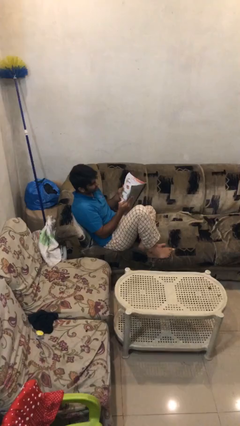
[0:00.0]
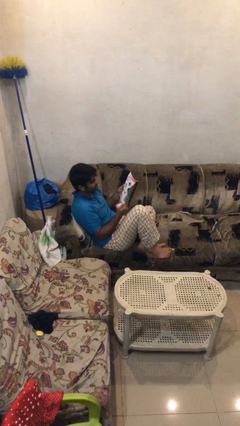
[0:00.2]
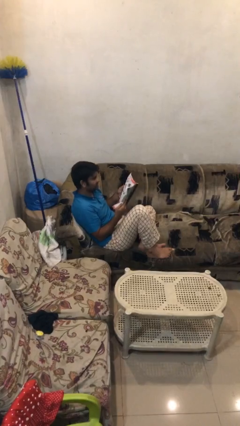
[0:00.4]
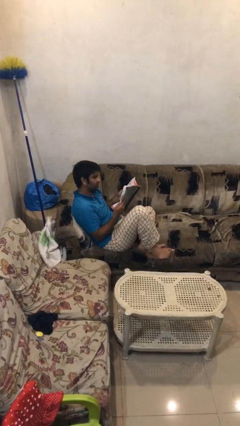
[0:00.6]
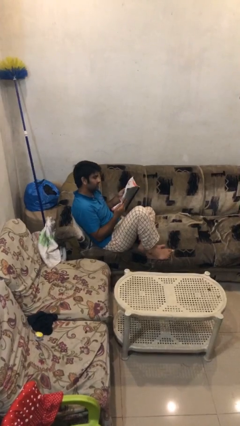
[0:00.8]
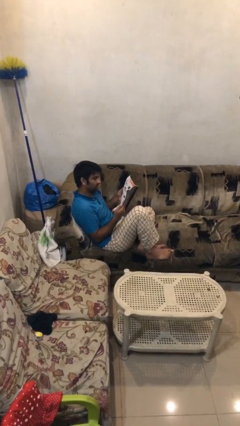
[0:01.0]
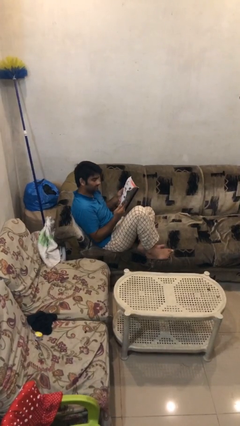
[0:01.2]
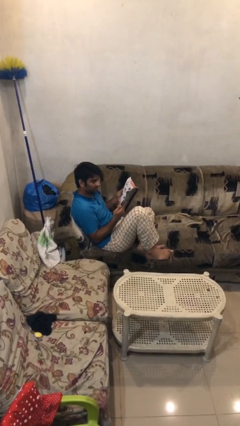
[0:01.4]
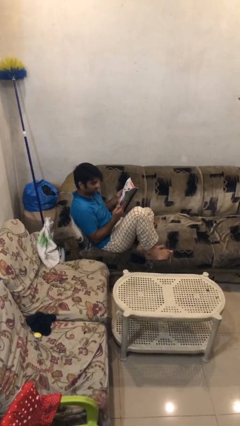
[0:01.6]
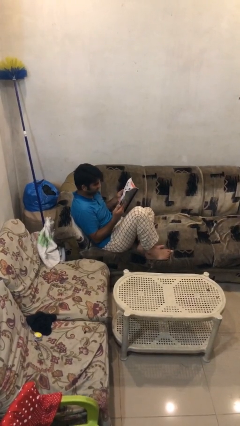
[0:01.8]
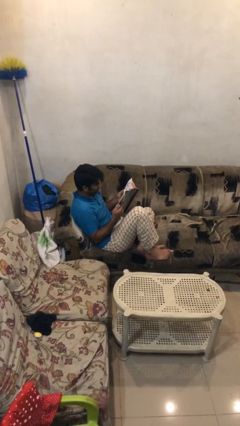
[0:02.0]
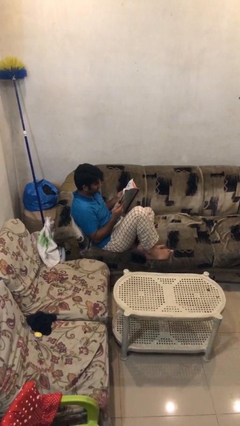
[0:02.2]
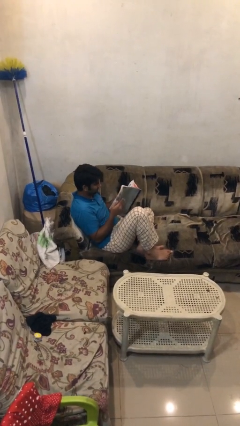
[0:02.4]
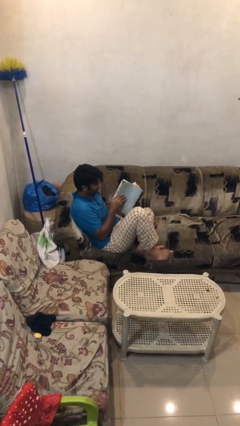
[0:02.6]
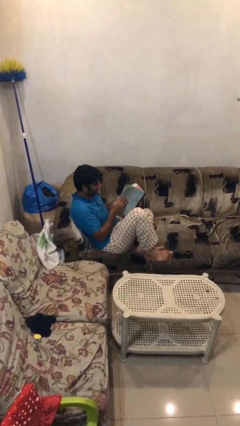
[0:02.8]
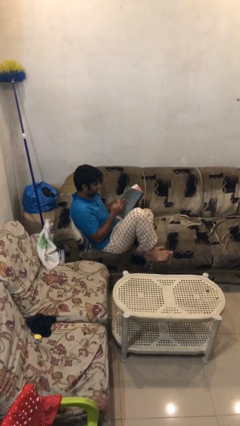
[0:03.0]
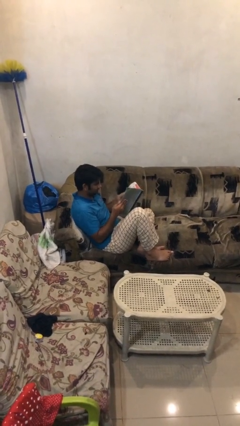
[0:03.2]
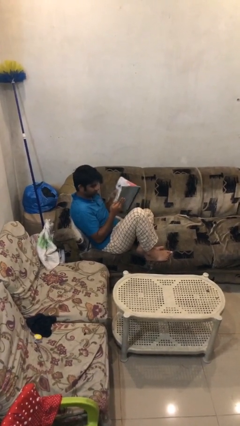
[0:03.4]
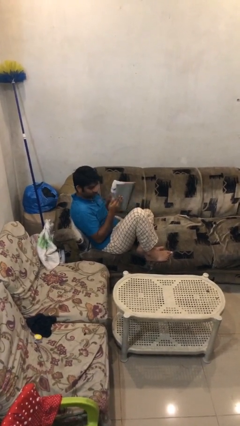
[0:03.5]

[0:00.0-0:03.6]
person reads document

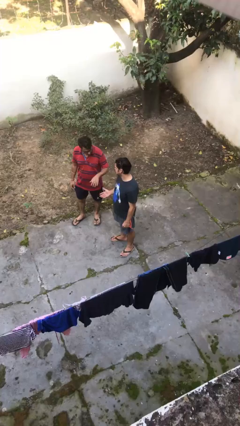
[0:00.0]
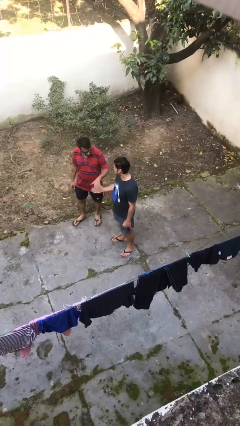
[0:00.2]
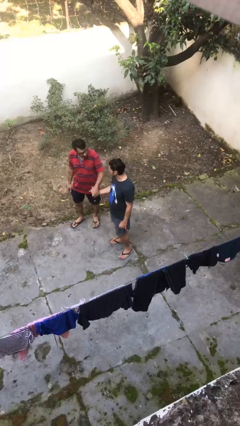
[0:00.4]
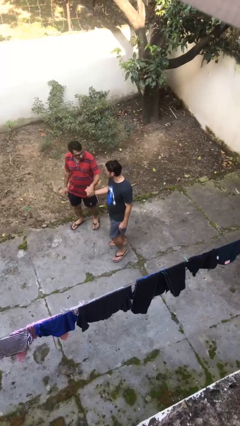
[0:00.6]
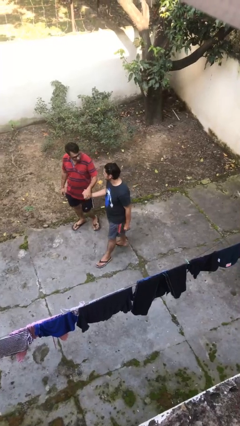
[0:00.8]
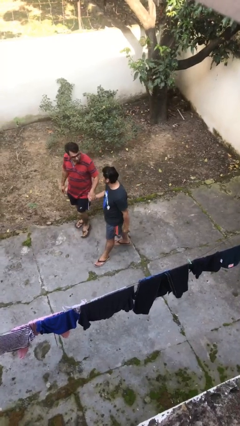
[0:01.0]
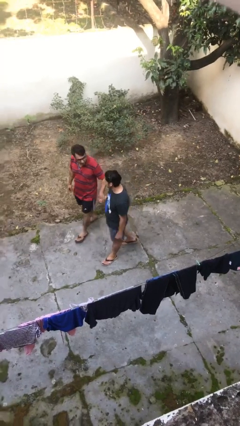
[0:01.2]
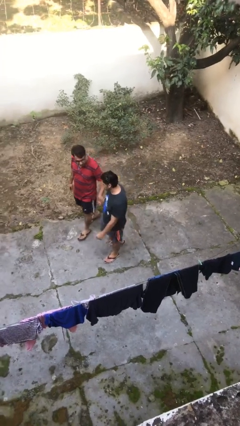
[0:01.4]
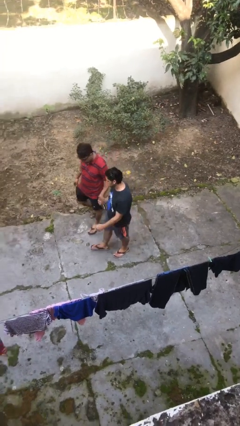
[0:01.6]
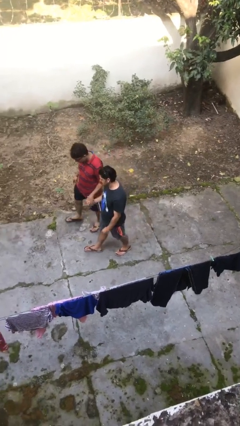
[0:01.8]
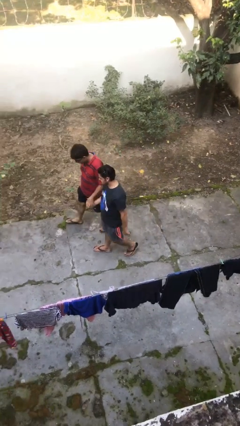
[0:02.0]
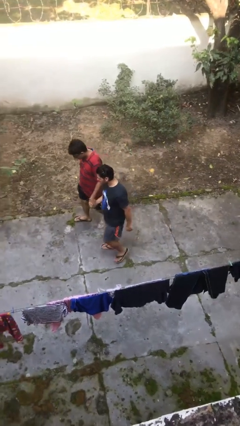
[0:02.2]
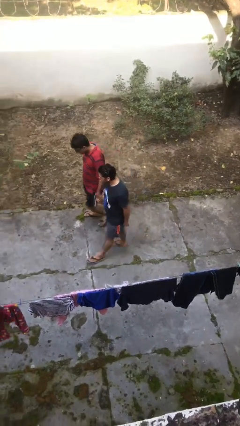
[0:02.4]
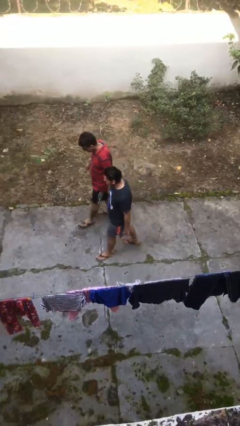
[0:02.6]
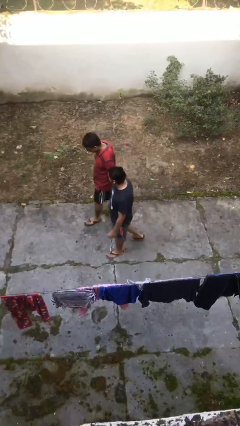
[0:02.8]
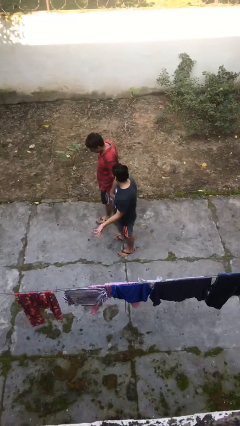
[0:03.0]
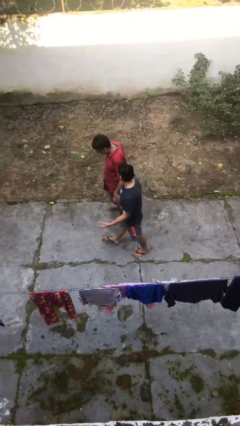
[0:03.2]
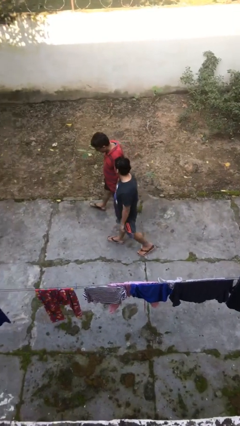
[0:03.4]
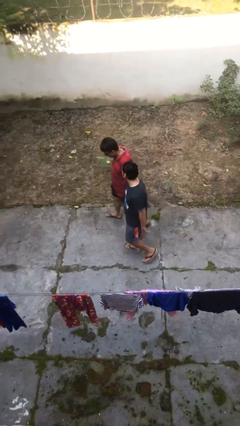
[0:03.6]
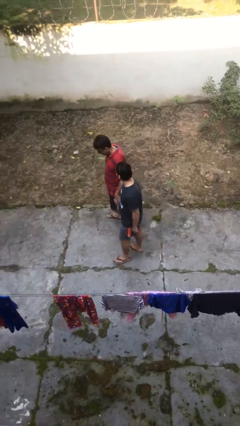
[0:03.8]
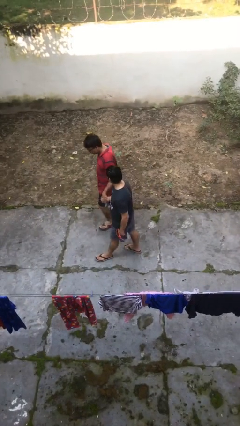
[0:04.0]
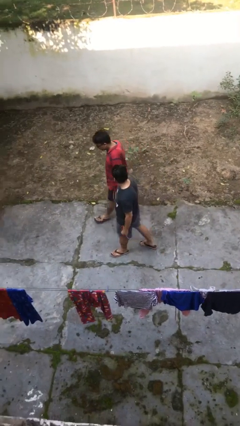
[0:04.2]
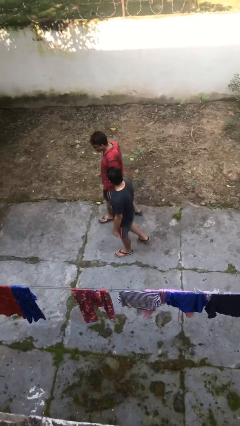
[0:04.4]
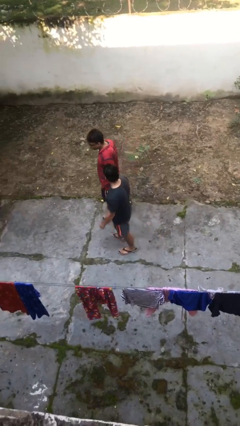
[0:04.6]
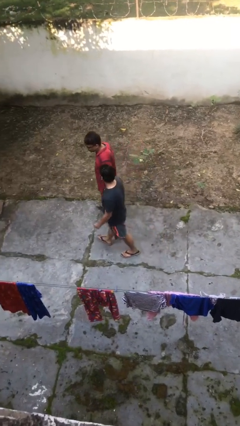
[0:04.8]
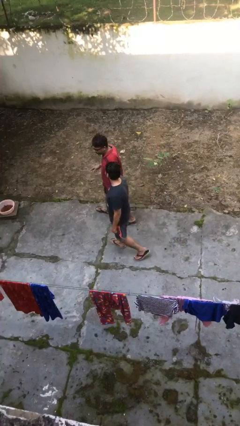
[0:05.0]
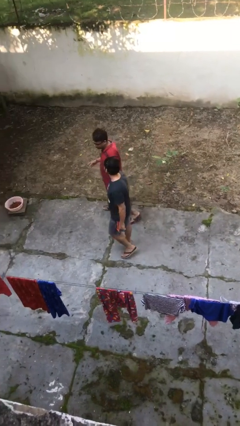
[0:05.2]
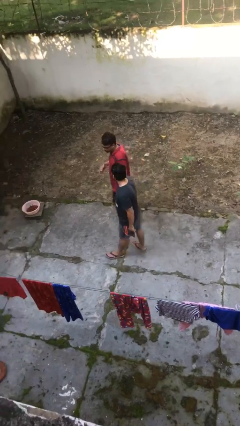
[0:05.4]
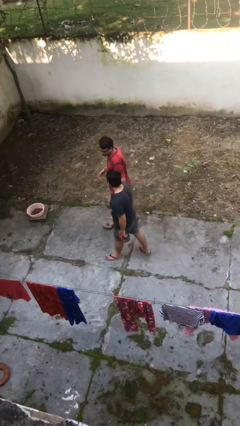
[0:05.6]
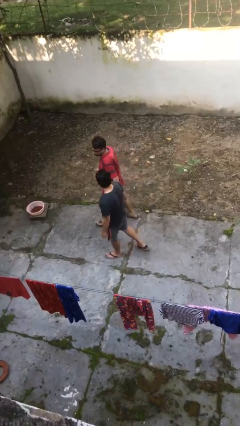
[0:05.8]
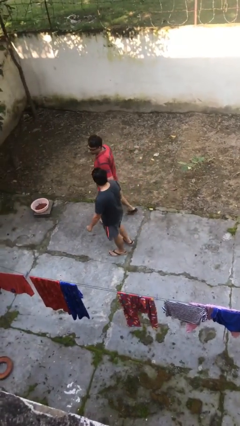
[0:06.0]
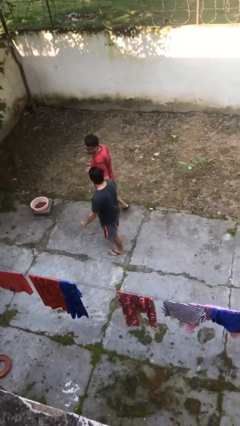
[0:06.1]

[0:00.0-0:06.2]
person holds hand

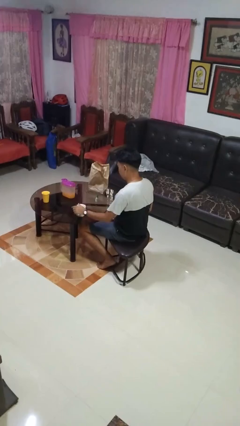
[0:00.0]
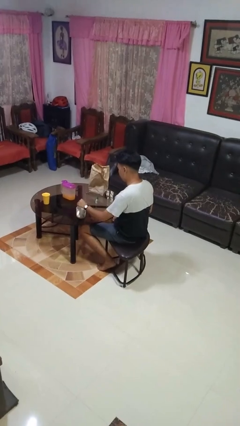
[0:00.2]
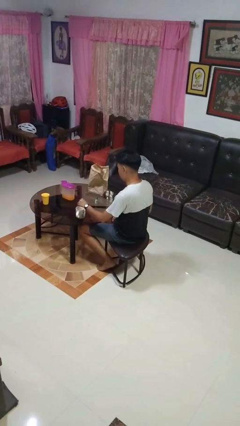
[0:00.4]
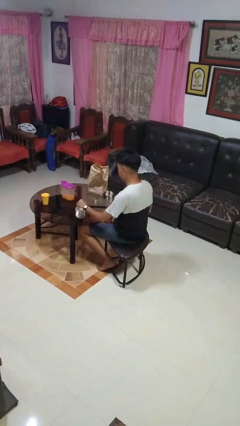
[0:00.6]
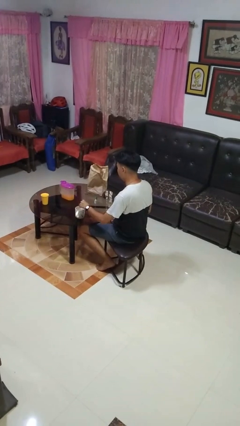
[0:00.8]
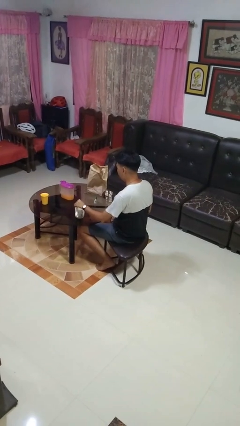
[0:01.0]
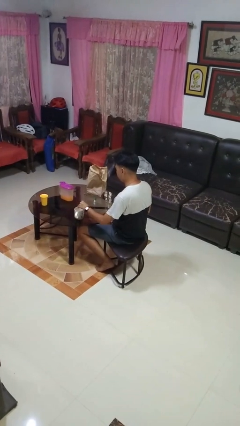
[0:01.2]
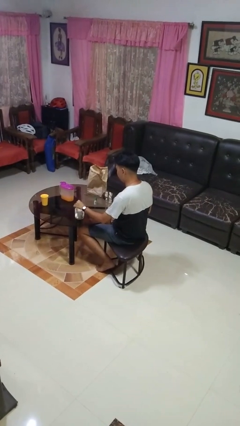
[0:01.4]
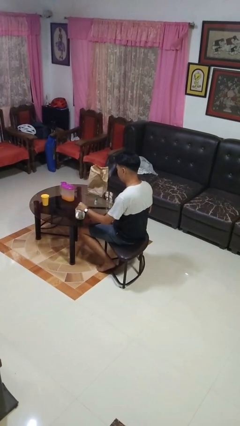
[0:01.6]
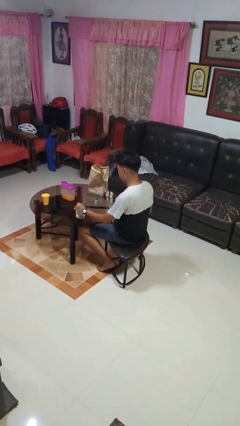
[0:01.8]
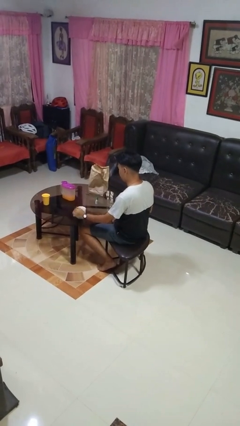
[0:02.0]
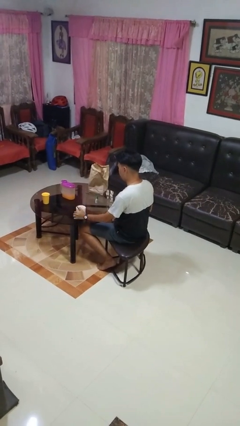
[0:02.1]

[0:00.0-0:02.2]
person stirs mug

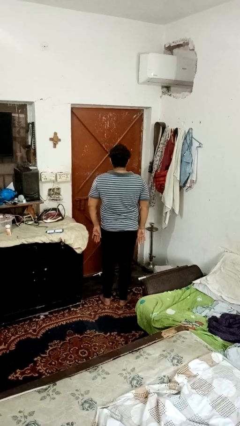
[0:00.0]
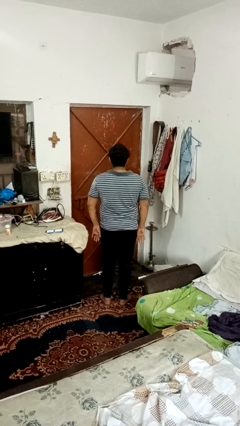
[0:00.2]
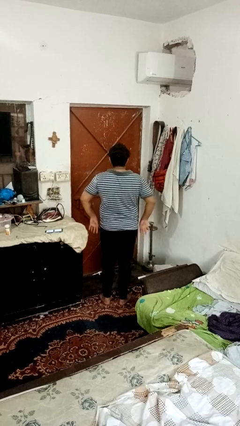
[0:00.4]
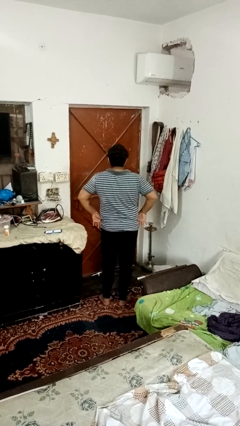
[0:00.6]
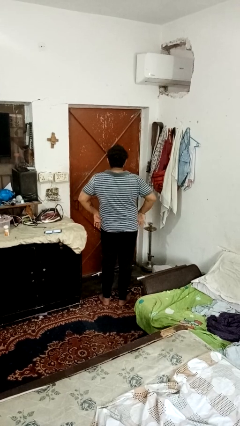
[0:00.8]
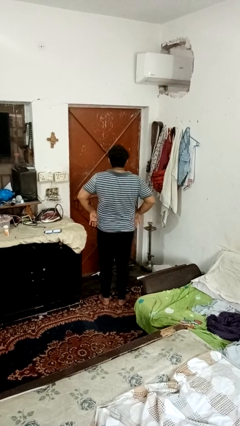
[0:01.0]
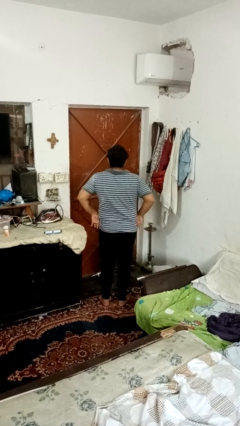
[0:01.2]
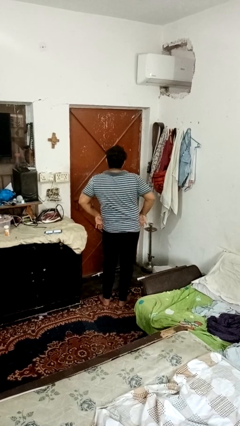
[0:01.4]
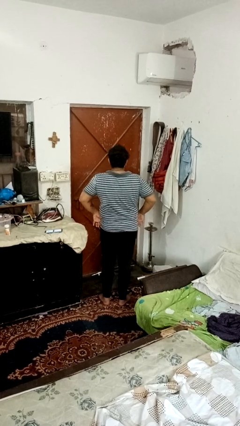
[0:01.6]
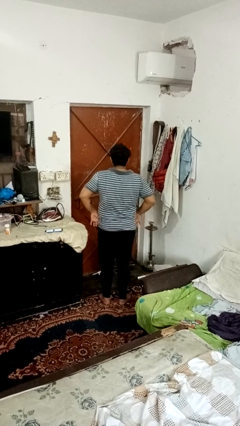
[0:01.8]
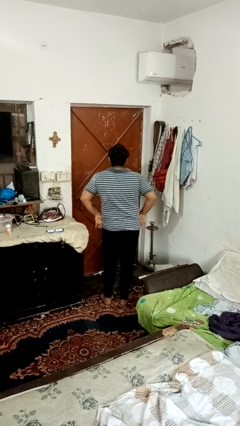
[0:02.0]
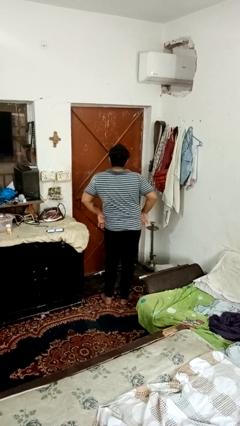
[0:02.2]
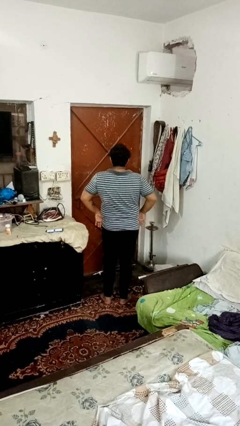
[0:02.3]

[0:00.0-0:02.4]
person wiggles hips

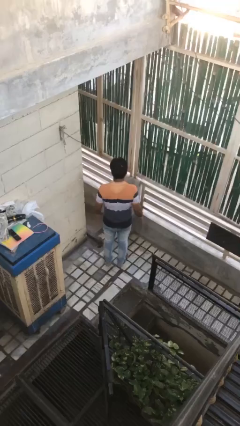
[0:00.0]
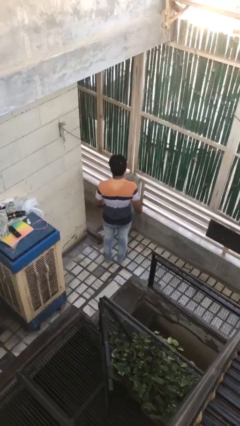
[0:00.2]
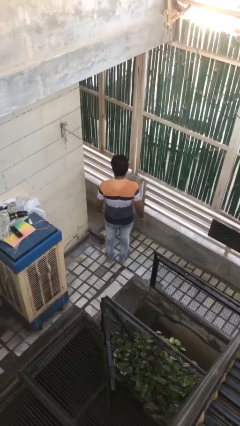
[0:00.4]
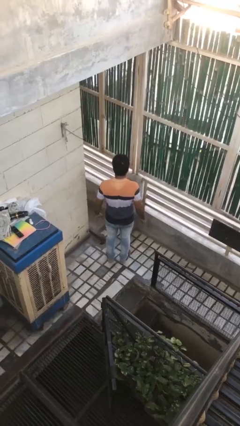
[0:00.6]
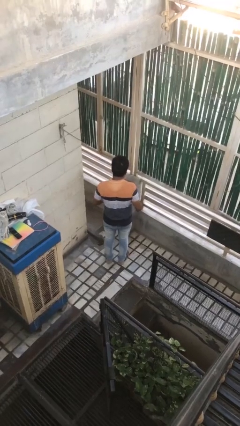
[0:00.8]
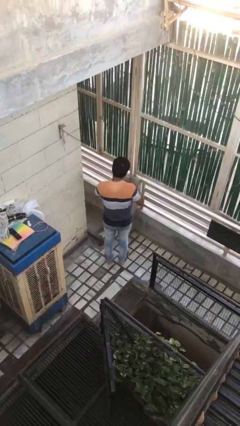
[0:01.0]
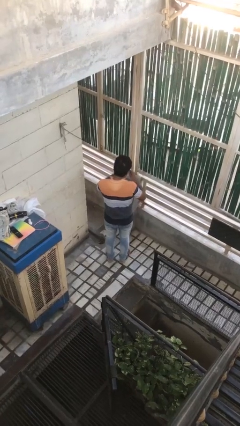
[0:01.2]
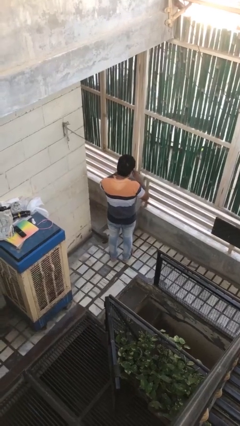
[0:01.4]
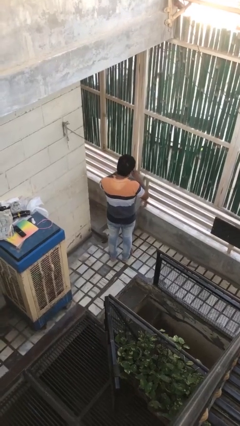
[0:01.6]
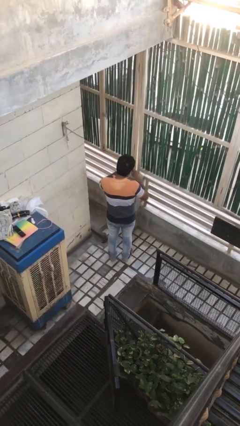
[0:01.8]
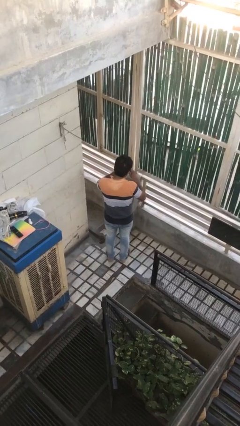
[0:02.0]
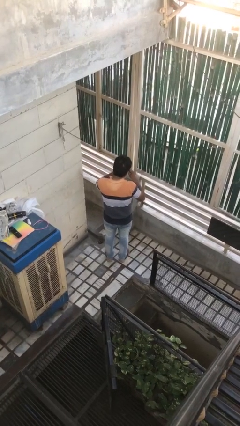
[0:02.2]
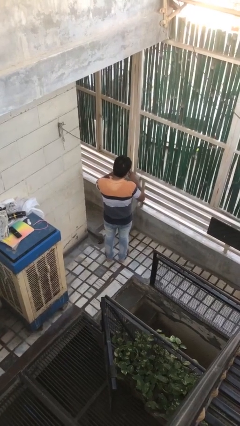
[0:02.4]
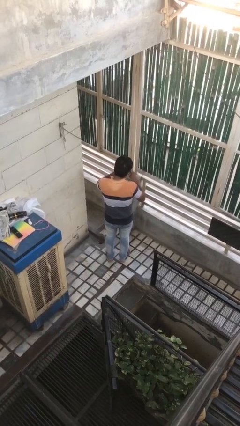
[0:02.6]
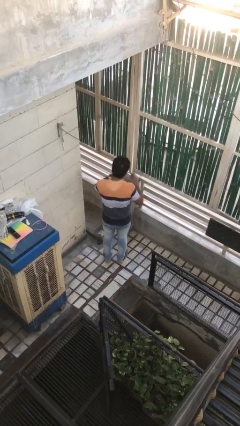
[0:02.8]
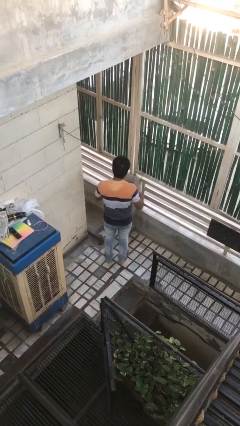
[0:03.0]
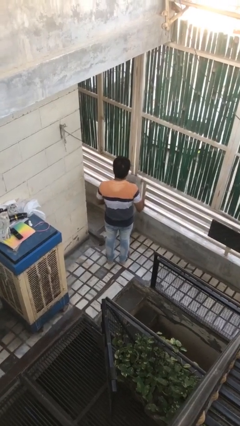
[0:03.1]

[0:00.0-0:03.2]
person files fingernails
